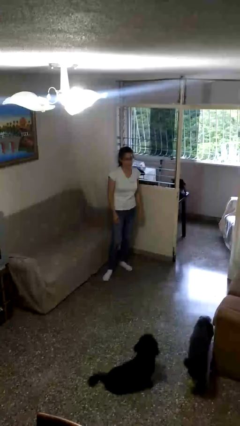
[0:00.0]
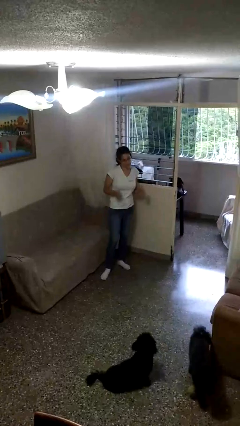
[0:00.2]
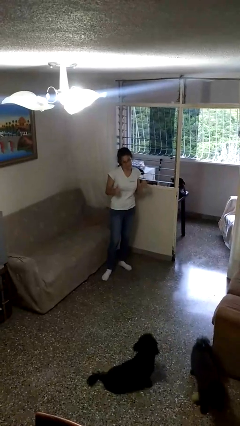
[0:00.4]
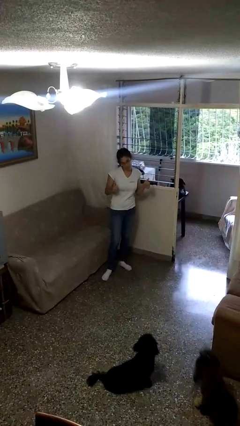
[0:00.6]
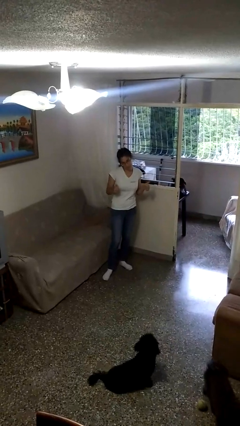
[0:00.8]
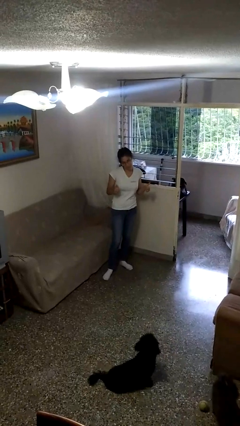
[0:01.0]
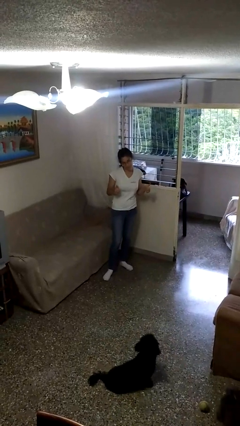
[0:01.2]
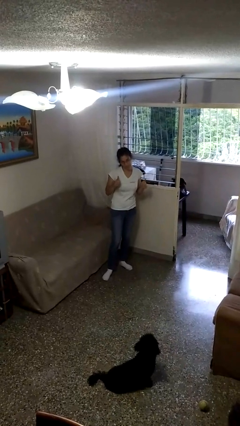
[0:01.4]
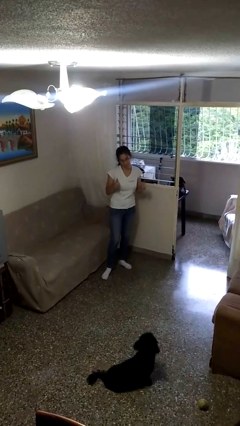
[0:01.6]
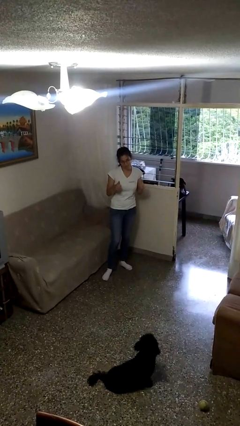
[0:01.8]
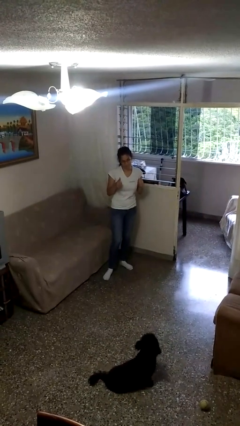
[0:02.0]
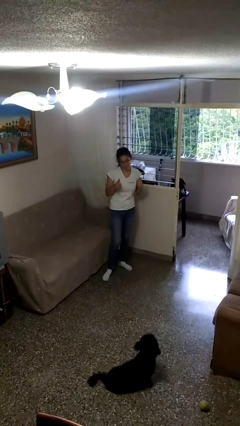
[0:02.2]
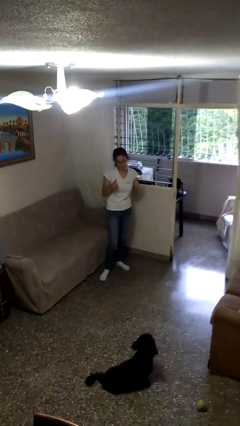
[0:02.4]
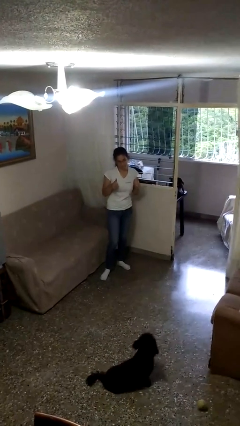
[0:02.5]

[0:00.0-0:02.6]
person gestures thumbs up

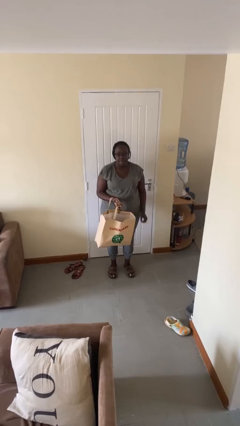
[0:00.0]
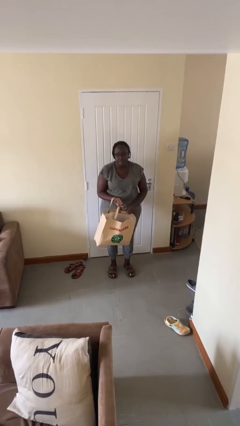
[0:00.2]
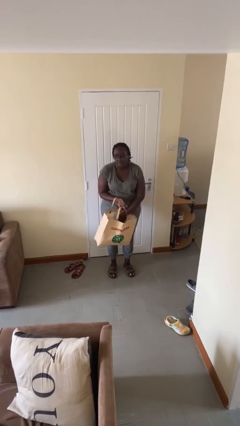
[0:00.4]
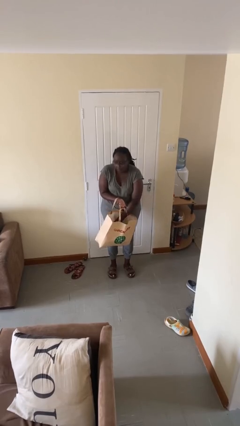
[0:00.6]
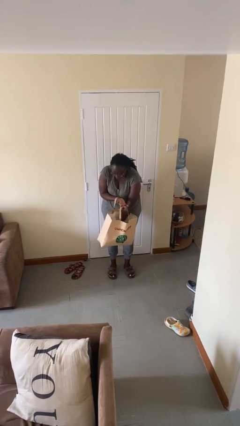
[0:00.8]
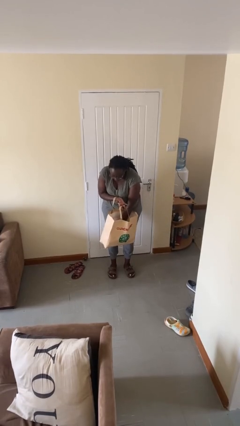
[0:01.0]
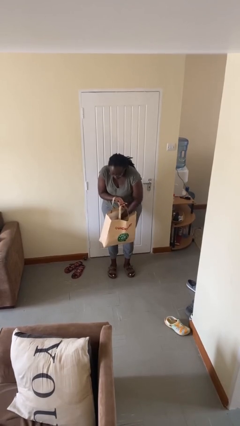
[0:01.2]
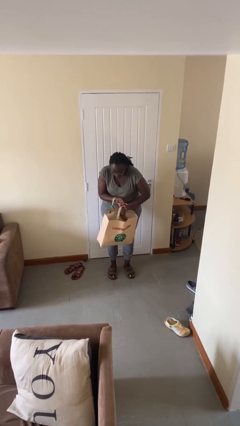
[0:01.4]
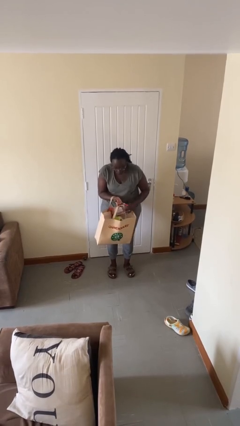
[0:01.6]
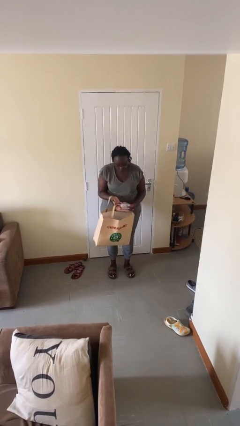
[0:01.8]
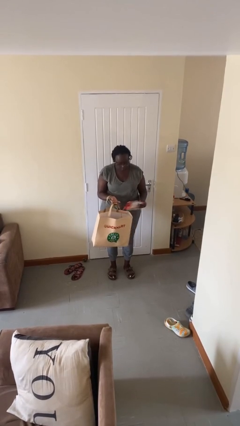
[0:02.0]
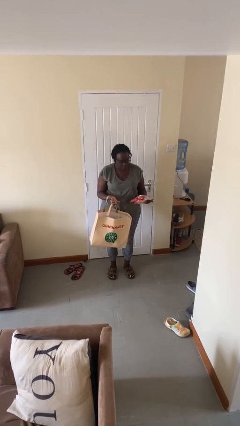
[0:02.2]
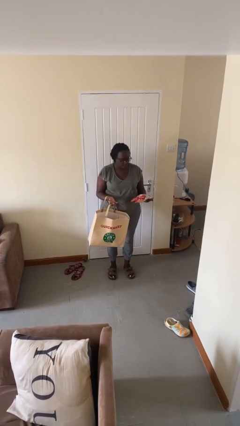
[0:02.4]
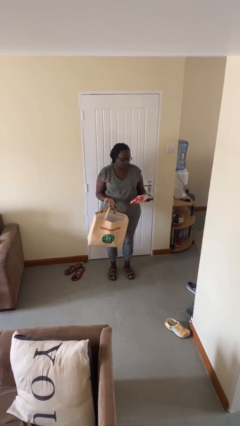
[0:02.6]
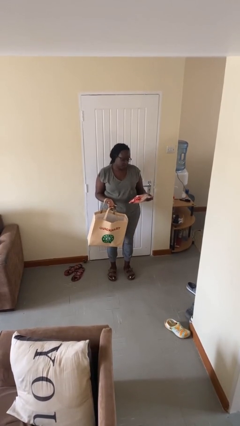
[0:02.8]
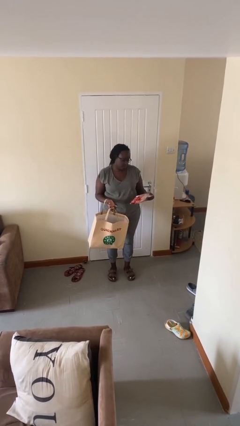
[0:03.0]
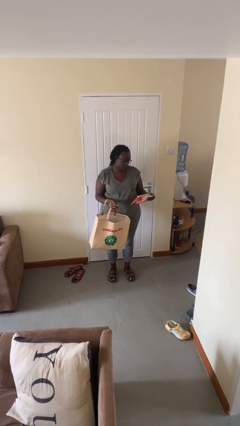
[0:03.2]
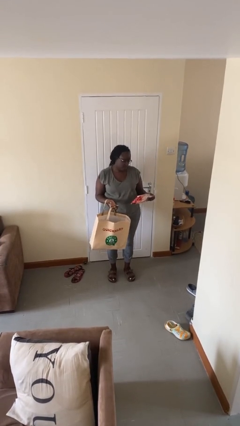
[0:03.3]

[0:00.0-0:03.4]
person takes object from bag

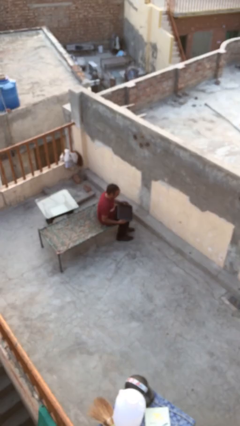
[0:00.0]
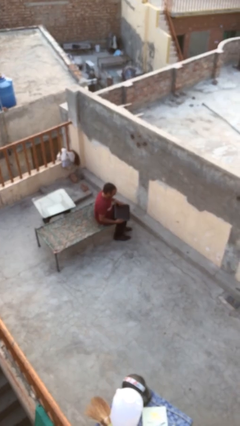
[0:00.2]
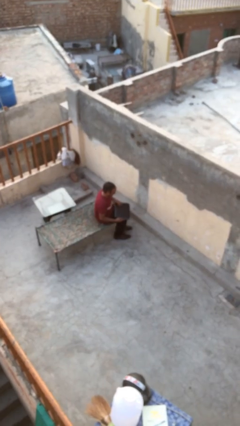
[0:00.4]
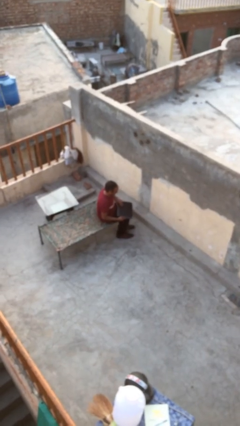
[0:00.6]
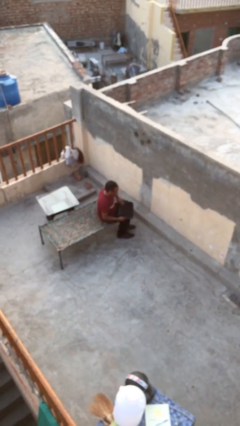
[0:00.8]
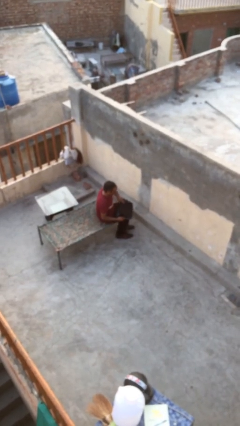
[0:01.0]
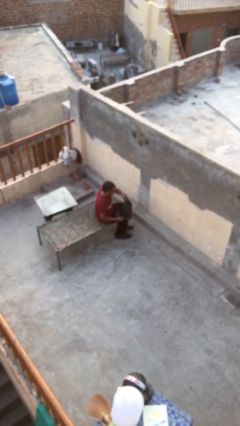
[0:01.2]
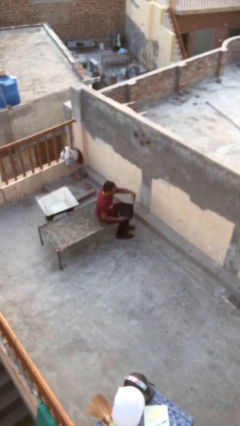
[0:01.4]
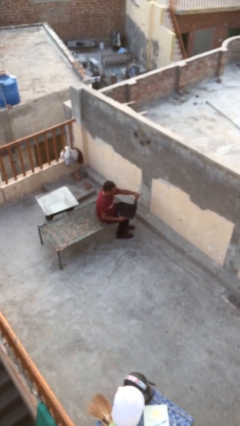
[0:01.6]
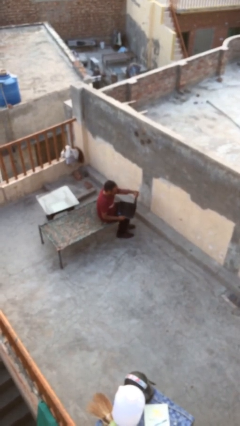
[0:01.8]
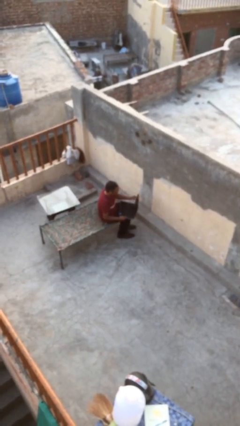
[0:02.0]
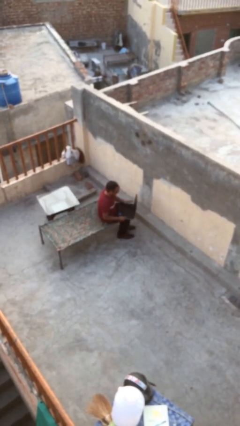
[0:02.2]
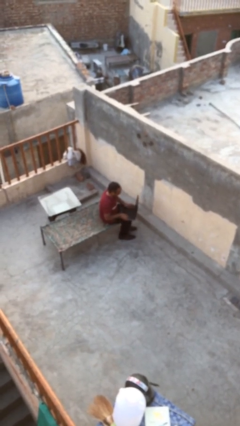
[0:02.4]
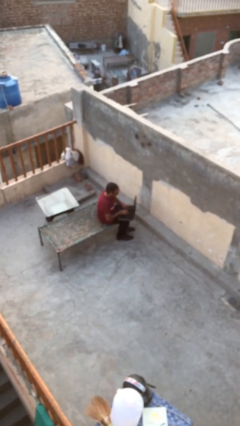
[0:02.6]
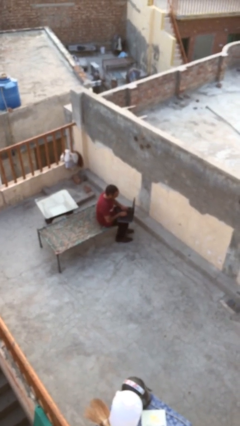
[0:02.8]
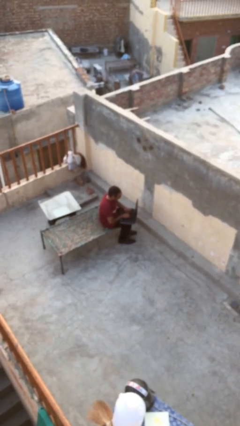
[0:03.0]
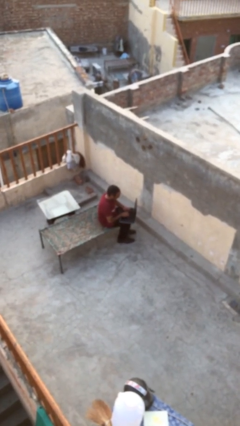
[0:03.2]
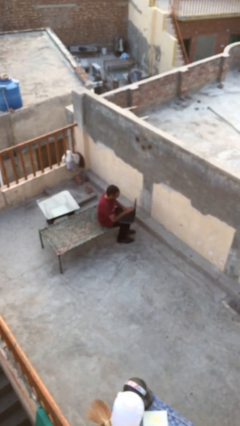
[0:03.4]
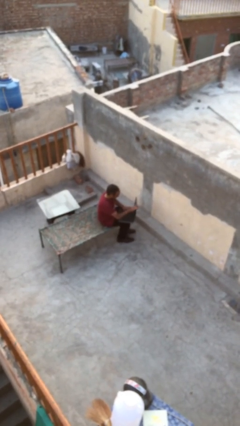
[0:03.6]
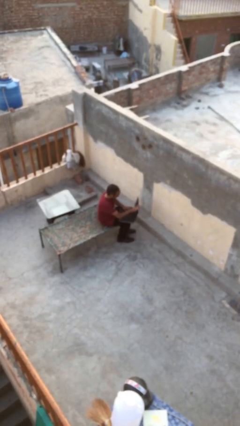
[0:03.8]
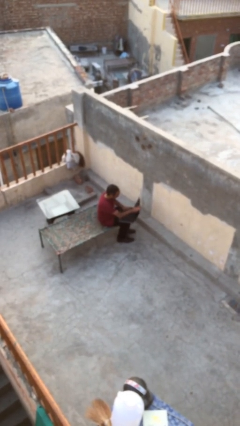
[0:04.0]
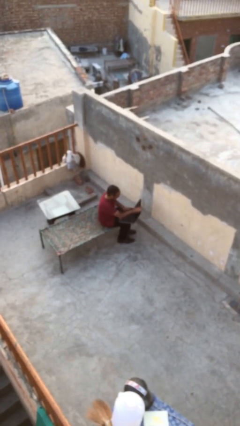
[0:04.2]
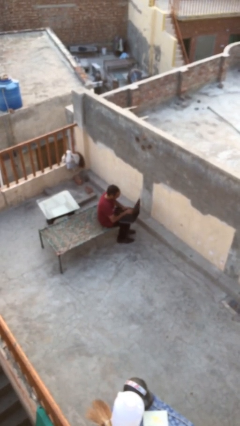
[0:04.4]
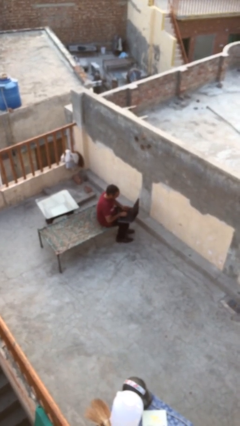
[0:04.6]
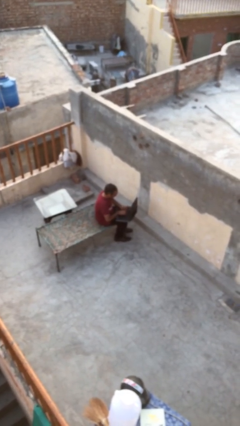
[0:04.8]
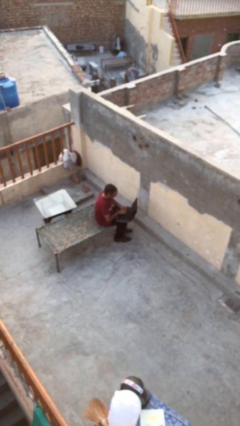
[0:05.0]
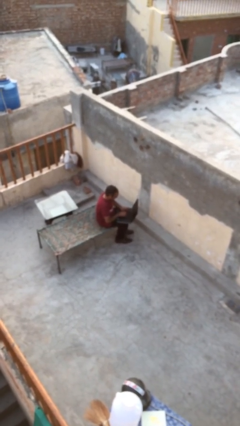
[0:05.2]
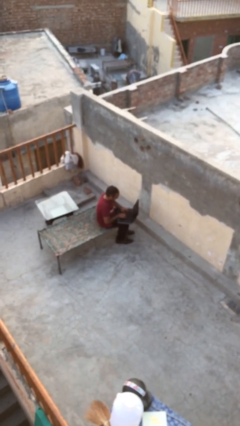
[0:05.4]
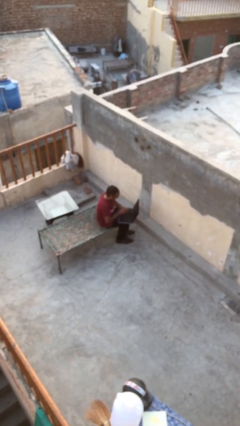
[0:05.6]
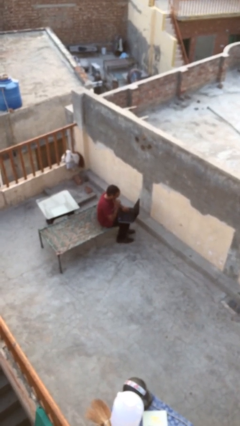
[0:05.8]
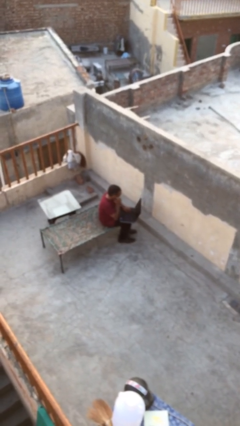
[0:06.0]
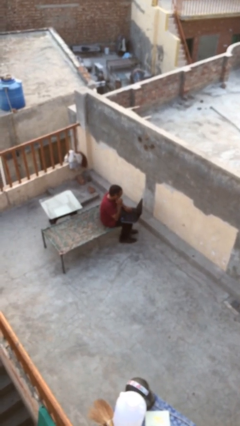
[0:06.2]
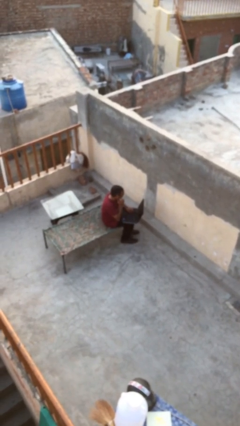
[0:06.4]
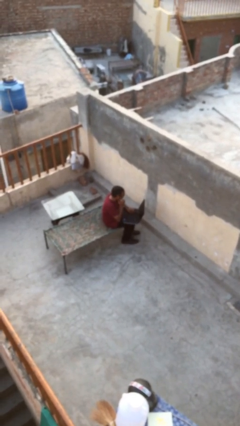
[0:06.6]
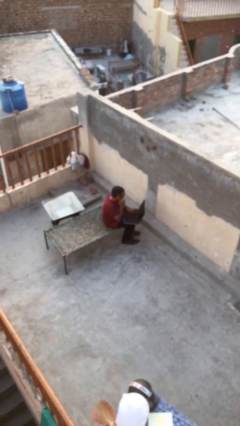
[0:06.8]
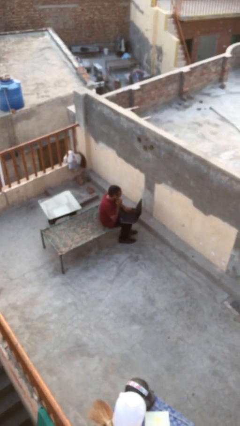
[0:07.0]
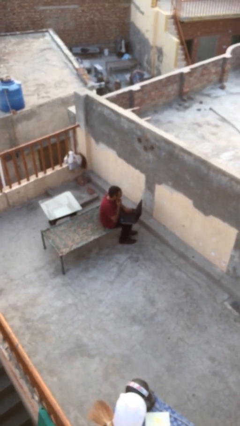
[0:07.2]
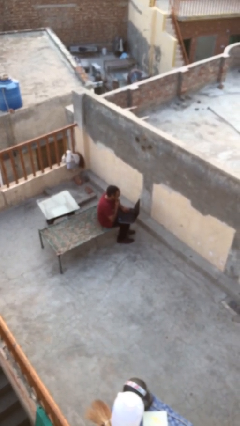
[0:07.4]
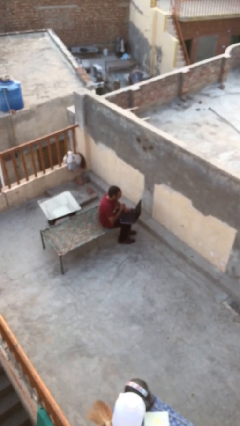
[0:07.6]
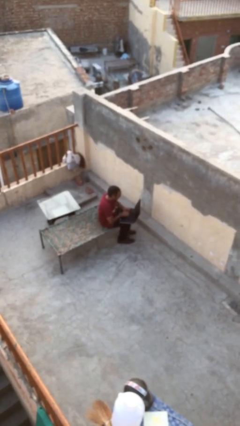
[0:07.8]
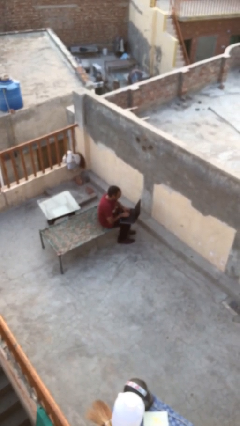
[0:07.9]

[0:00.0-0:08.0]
person interacts with laptop

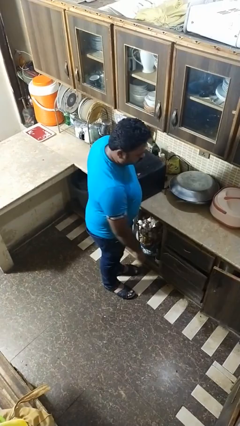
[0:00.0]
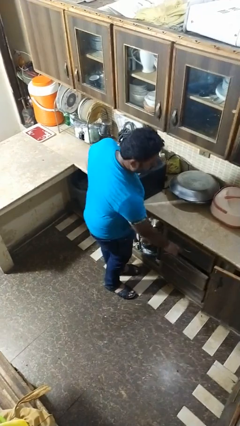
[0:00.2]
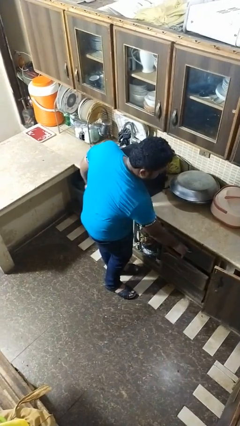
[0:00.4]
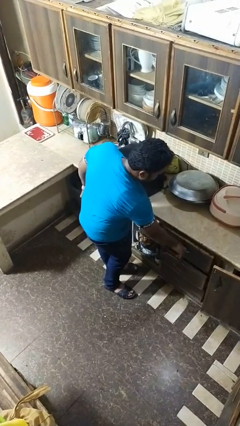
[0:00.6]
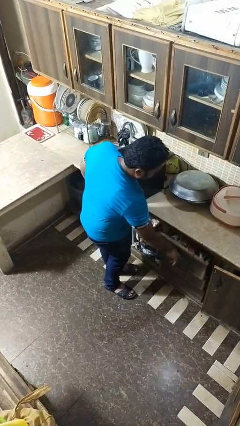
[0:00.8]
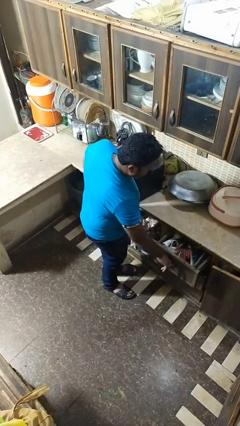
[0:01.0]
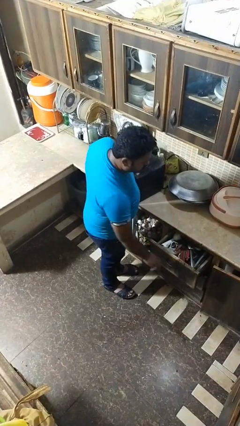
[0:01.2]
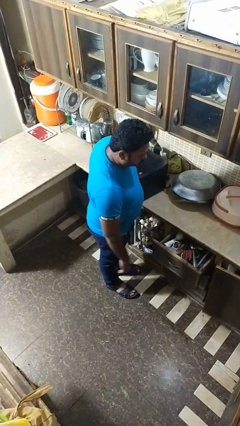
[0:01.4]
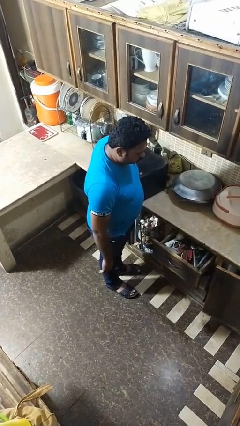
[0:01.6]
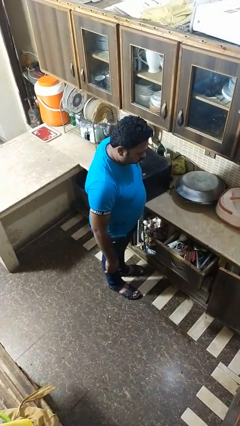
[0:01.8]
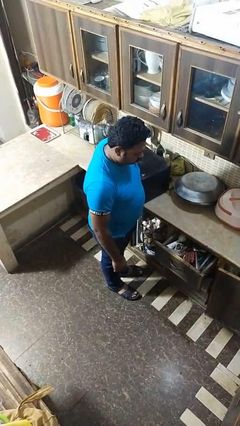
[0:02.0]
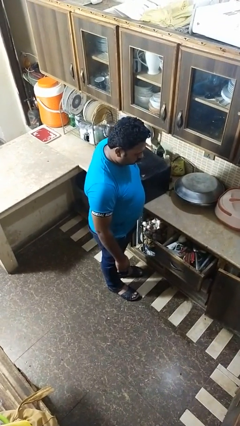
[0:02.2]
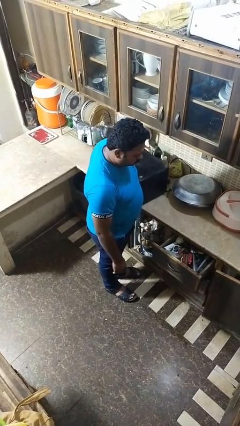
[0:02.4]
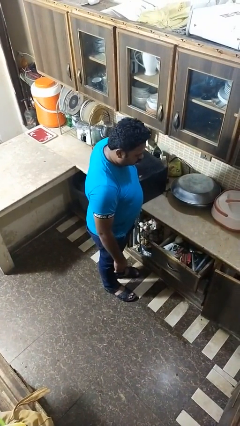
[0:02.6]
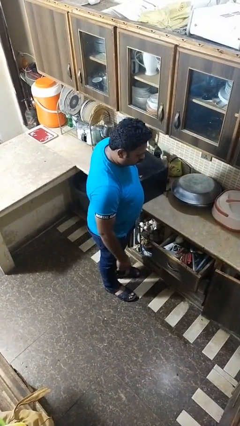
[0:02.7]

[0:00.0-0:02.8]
person opens dresser drawer

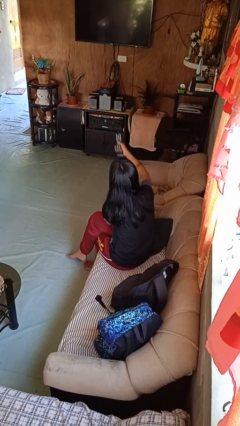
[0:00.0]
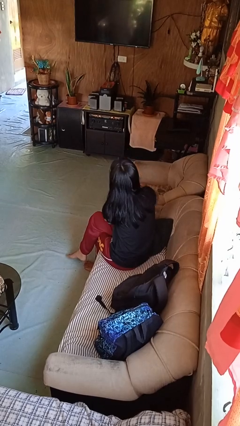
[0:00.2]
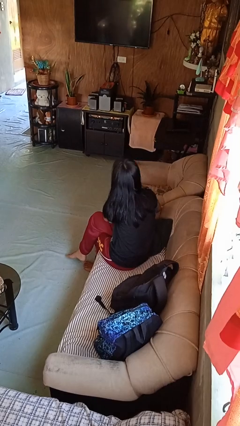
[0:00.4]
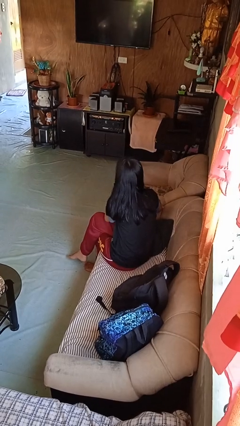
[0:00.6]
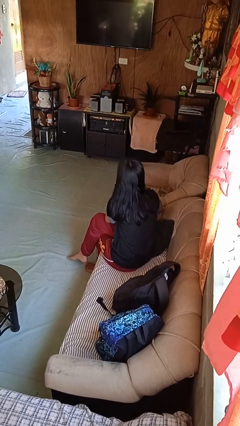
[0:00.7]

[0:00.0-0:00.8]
person uses television remote

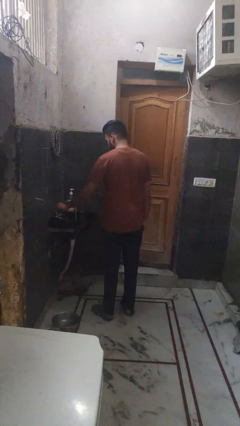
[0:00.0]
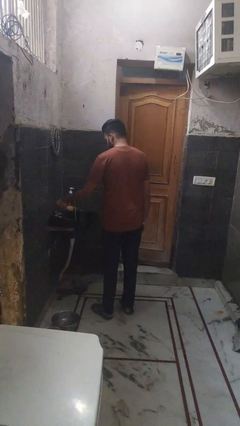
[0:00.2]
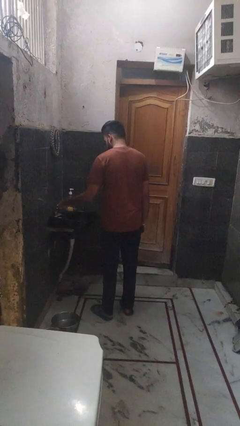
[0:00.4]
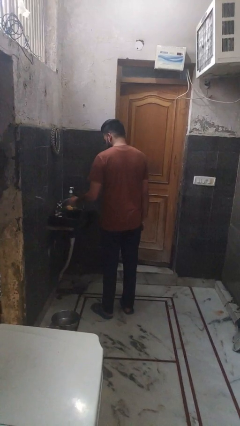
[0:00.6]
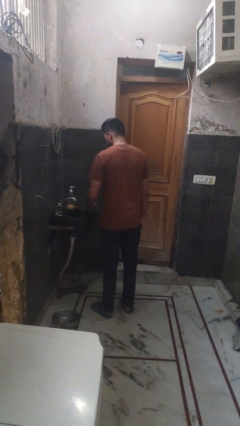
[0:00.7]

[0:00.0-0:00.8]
person turns off faucet
